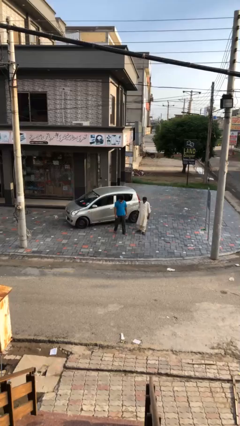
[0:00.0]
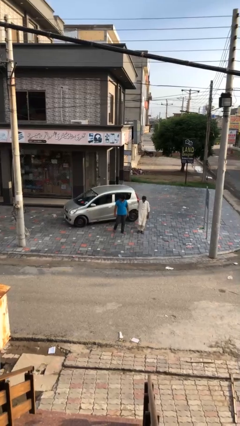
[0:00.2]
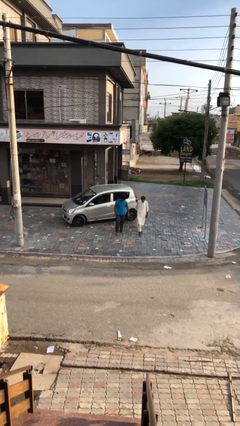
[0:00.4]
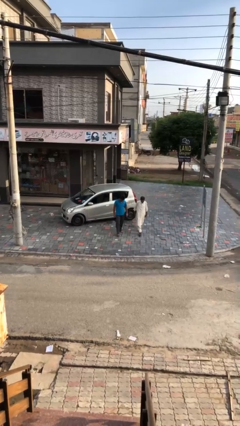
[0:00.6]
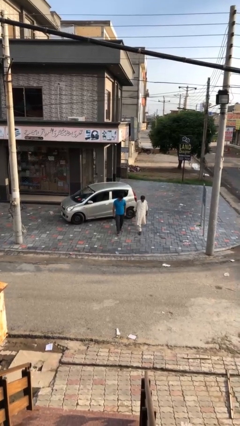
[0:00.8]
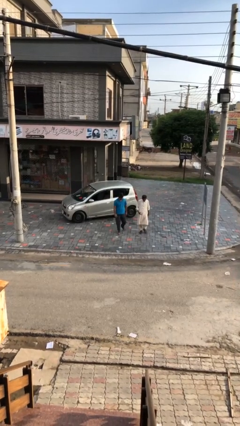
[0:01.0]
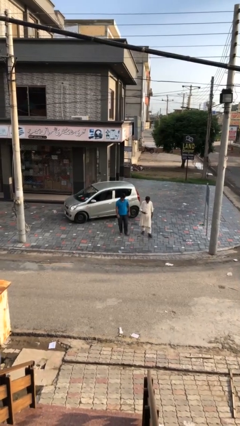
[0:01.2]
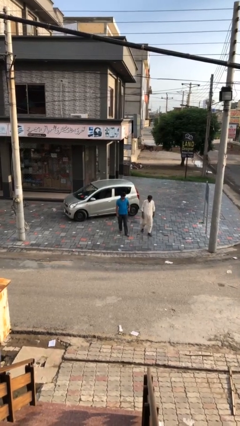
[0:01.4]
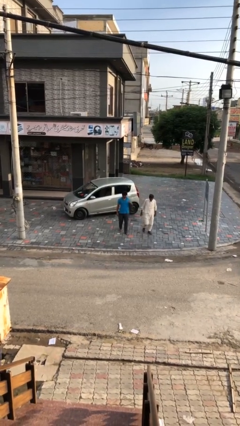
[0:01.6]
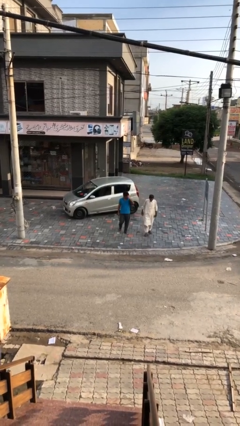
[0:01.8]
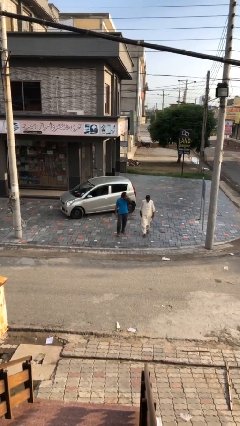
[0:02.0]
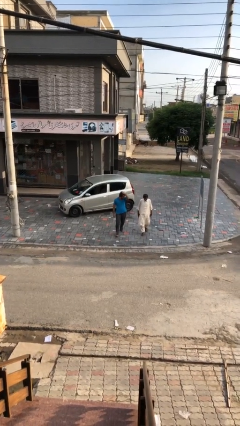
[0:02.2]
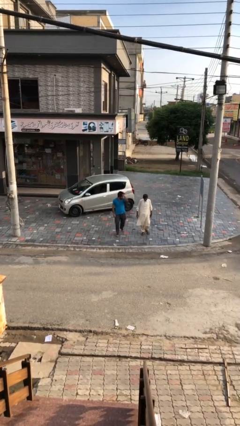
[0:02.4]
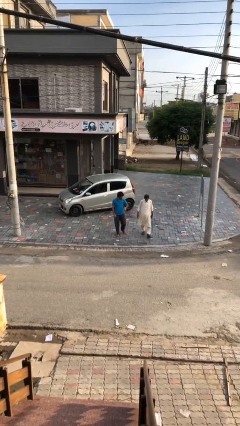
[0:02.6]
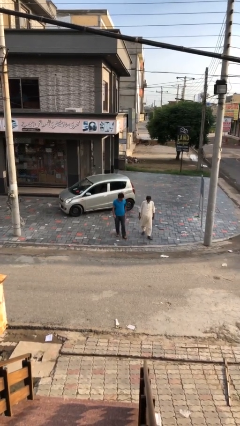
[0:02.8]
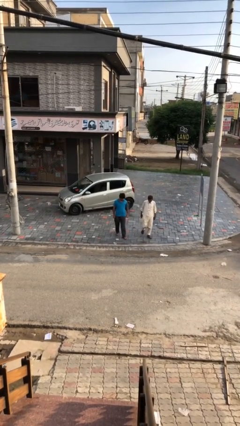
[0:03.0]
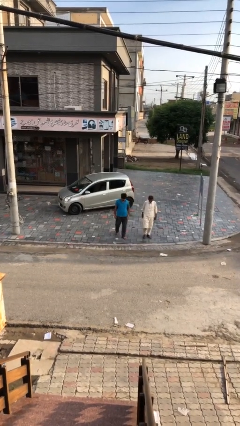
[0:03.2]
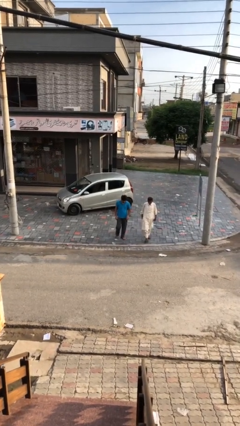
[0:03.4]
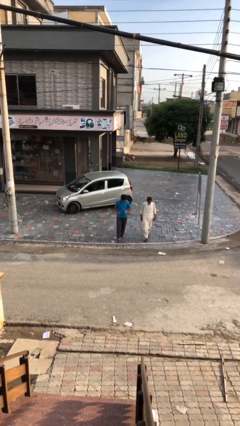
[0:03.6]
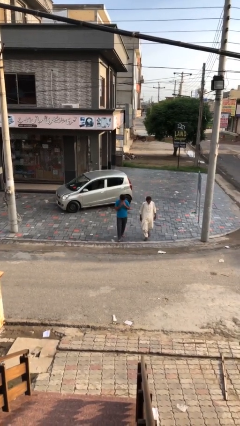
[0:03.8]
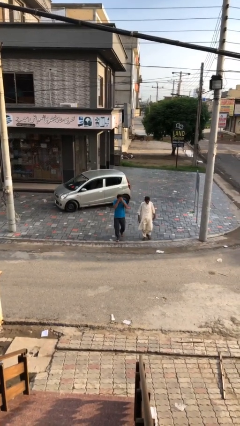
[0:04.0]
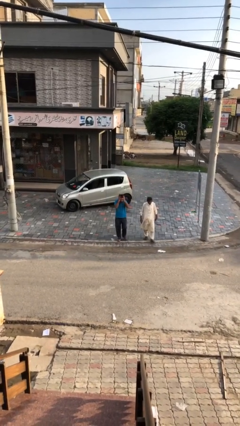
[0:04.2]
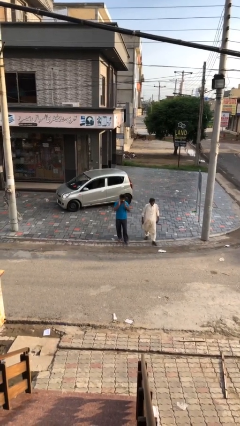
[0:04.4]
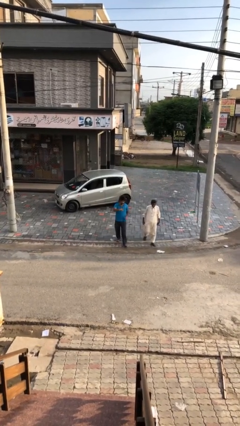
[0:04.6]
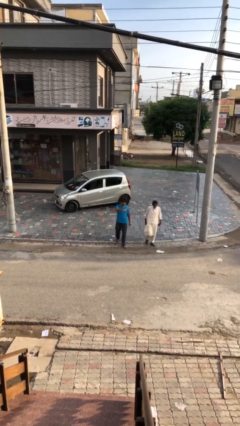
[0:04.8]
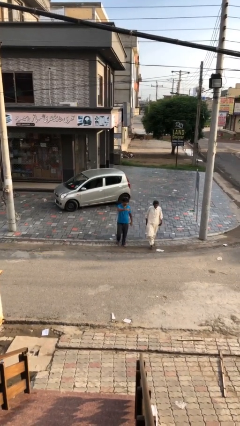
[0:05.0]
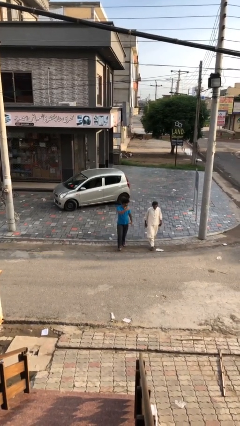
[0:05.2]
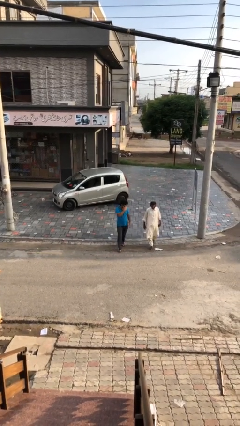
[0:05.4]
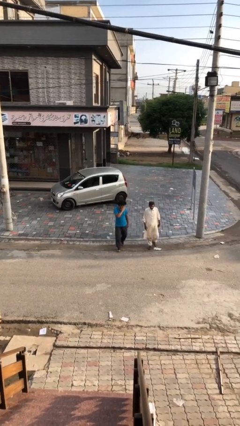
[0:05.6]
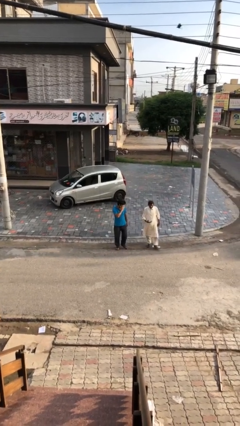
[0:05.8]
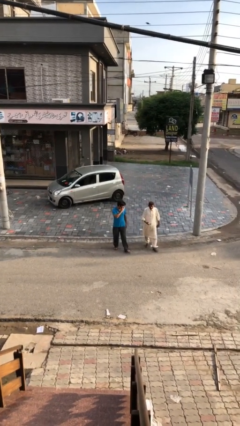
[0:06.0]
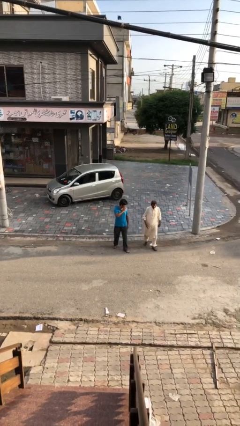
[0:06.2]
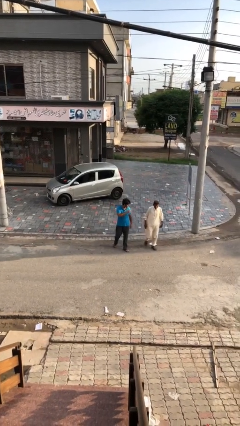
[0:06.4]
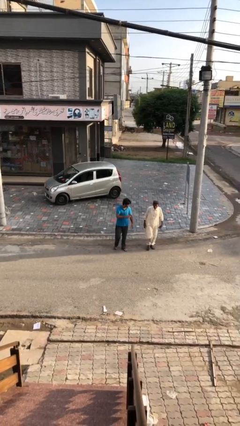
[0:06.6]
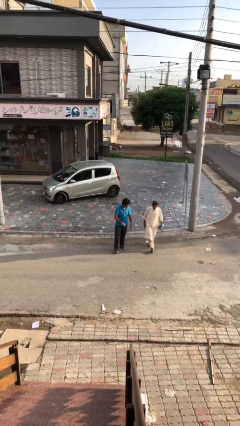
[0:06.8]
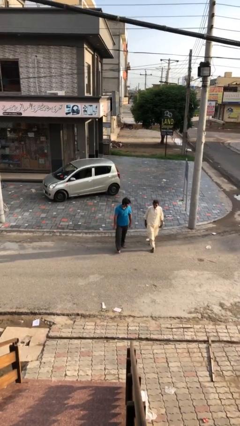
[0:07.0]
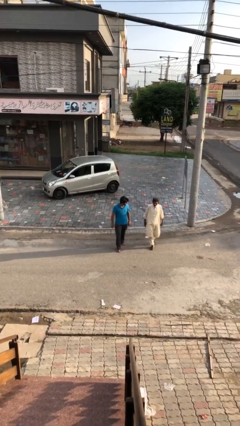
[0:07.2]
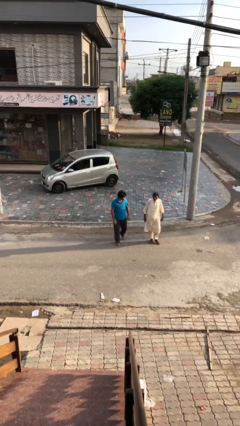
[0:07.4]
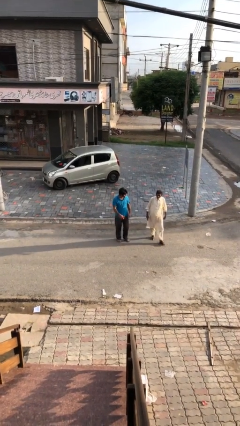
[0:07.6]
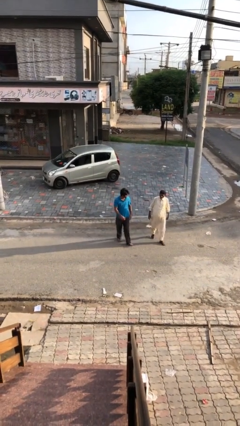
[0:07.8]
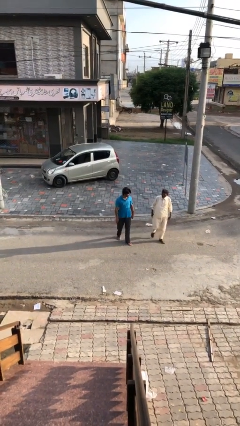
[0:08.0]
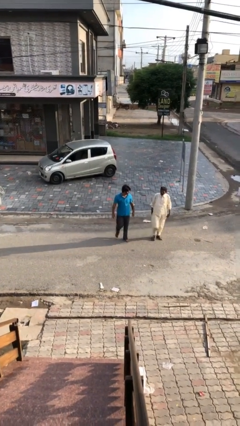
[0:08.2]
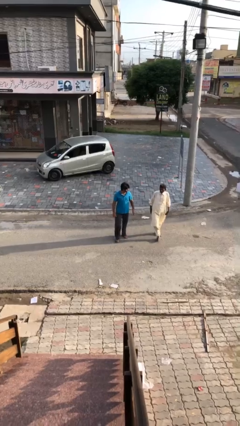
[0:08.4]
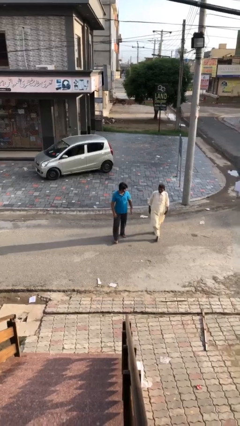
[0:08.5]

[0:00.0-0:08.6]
person talks to person

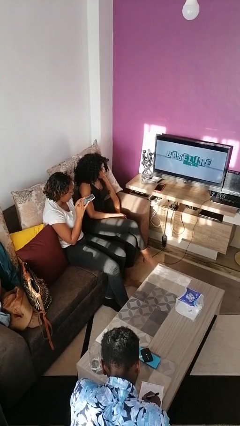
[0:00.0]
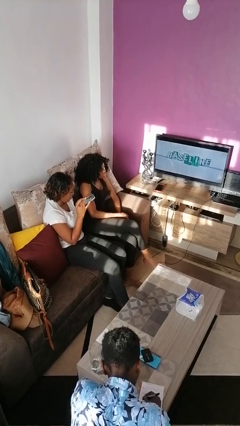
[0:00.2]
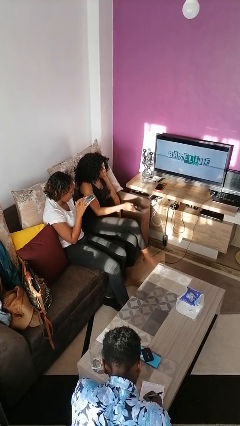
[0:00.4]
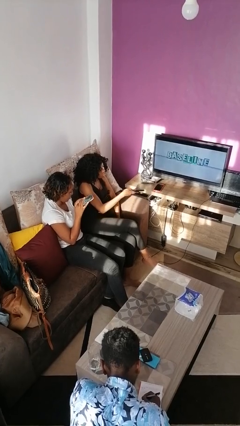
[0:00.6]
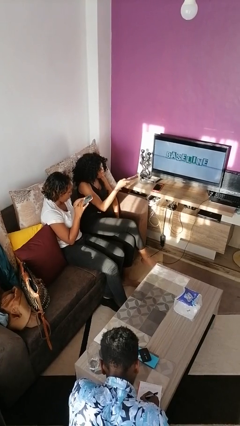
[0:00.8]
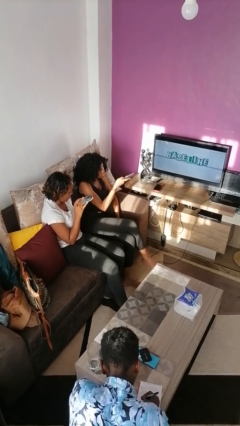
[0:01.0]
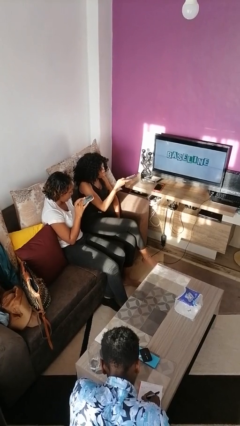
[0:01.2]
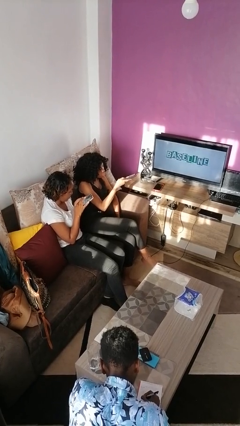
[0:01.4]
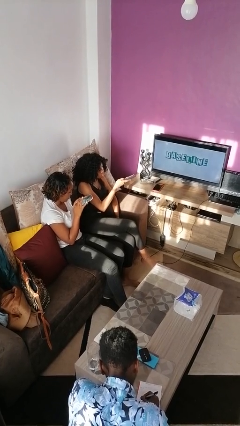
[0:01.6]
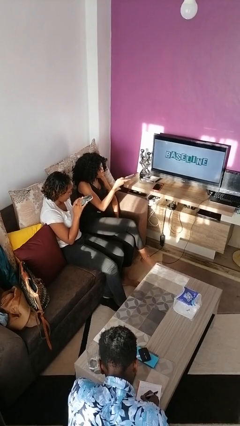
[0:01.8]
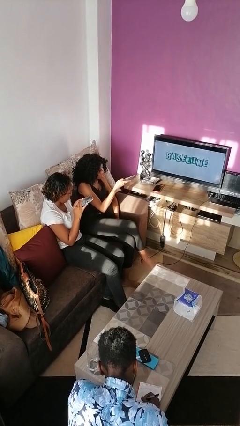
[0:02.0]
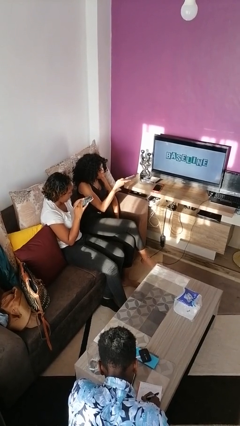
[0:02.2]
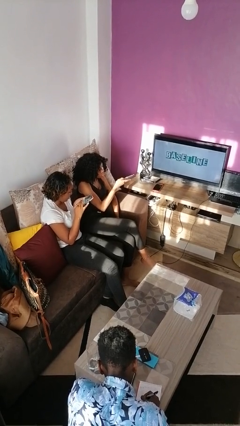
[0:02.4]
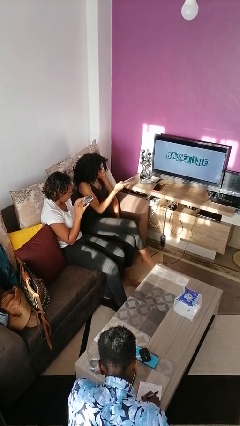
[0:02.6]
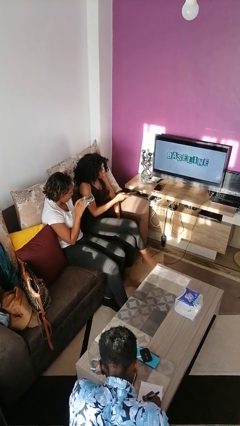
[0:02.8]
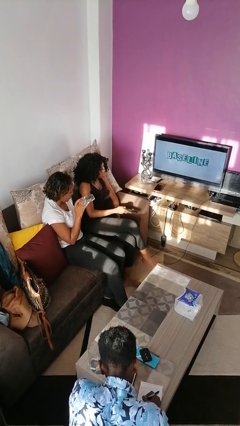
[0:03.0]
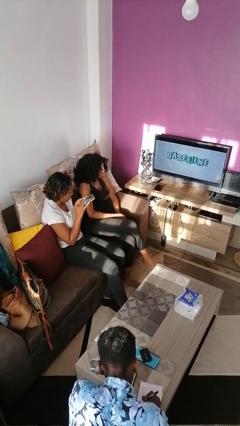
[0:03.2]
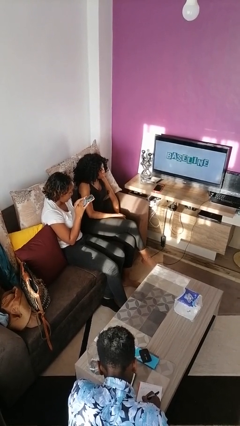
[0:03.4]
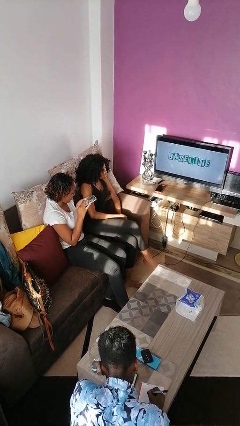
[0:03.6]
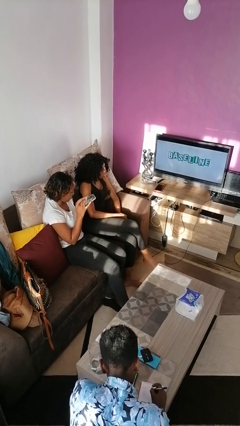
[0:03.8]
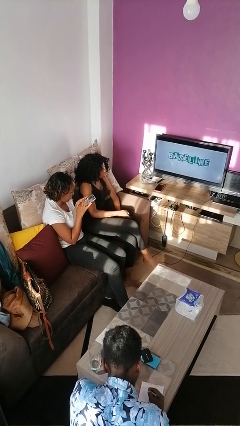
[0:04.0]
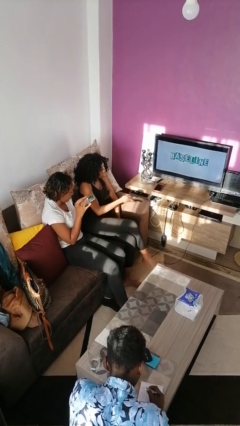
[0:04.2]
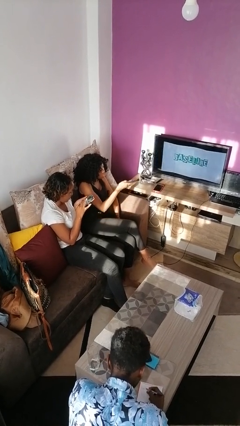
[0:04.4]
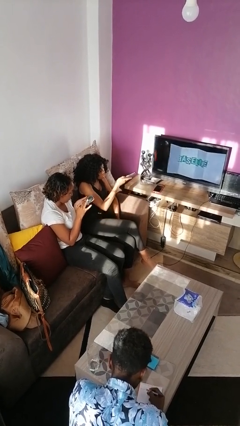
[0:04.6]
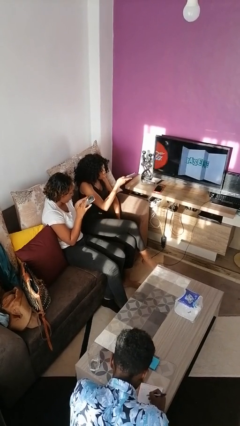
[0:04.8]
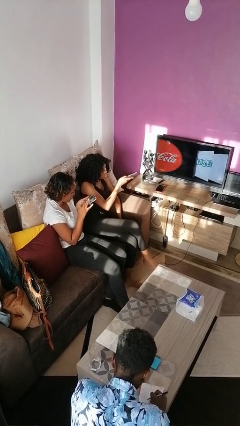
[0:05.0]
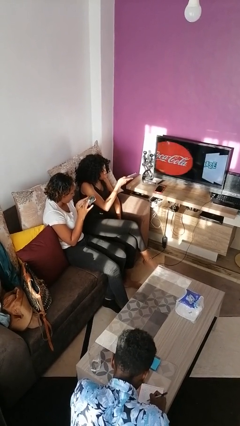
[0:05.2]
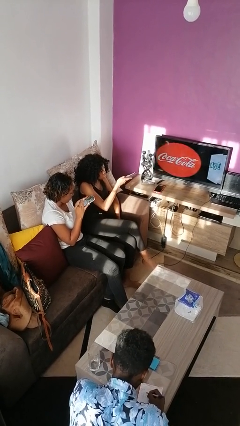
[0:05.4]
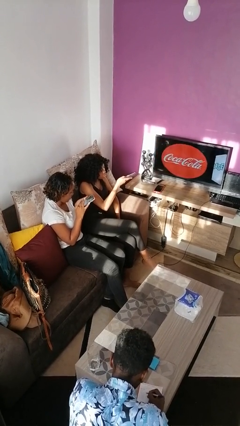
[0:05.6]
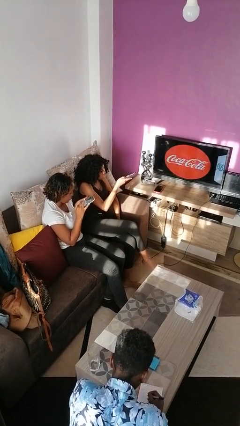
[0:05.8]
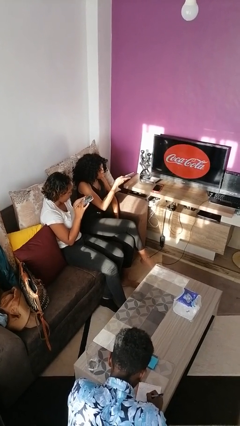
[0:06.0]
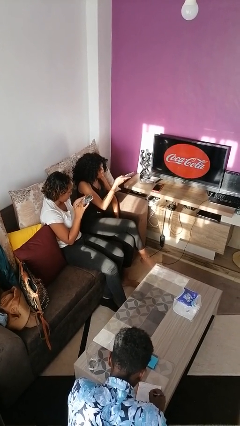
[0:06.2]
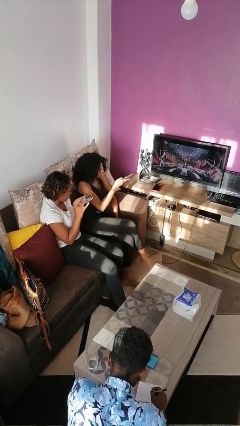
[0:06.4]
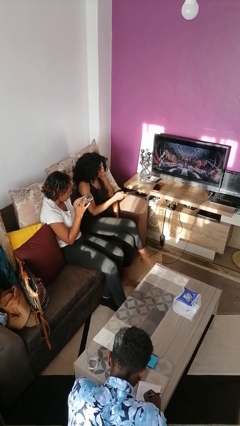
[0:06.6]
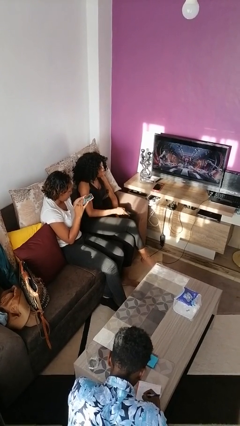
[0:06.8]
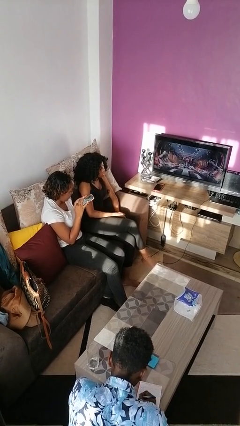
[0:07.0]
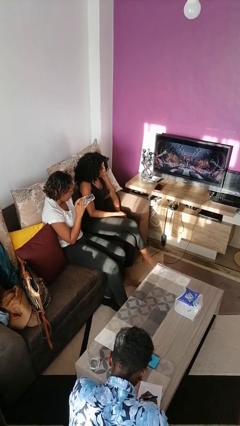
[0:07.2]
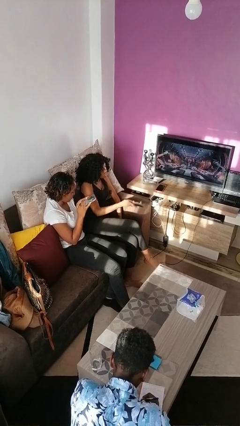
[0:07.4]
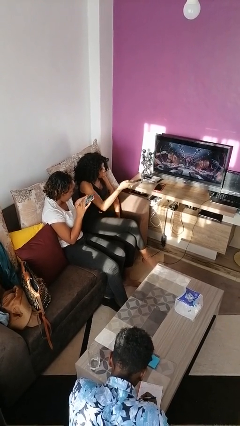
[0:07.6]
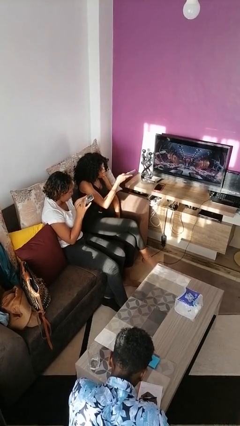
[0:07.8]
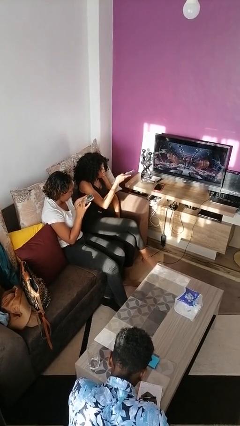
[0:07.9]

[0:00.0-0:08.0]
person puts on boots

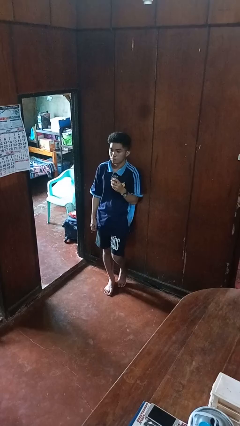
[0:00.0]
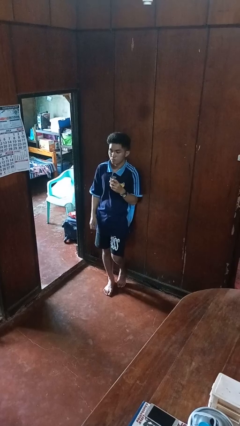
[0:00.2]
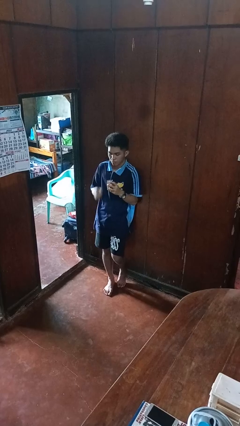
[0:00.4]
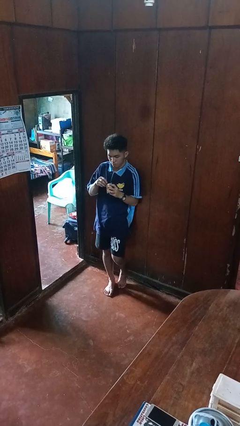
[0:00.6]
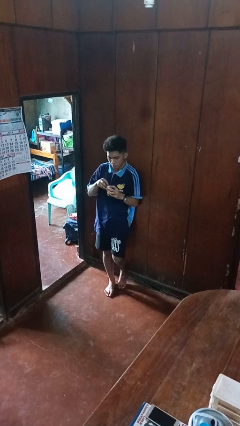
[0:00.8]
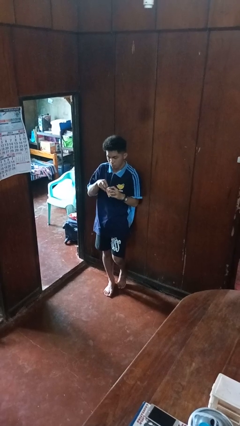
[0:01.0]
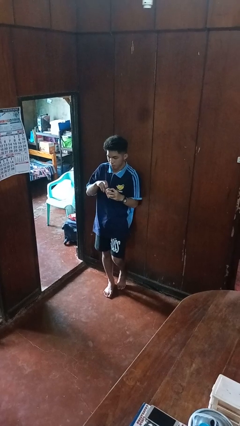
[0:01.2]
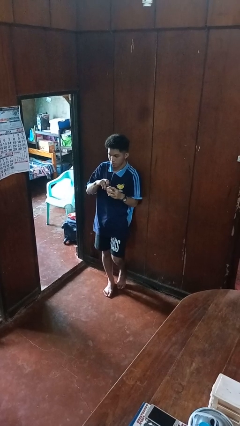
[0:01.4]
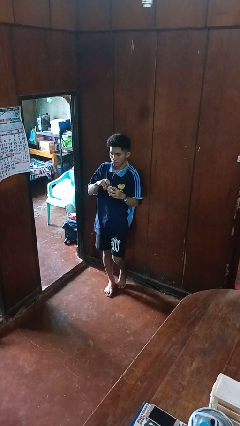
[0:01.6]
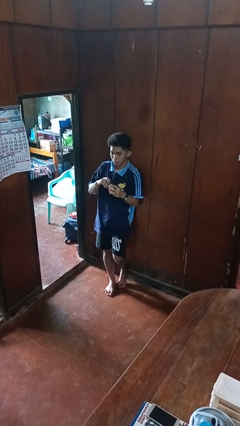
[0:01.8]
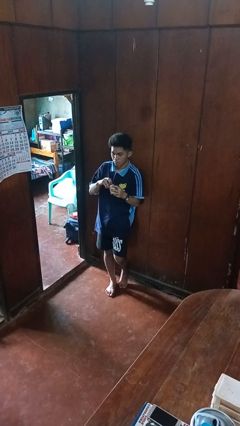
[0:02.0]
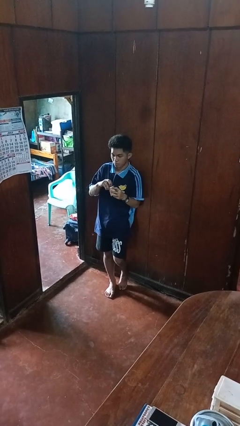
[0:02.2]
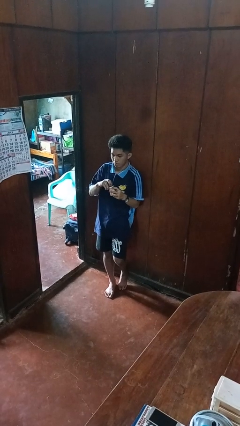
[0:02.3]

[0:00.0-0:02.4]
person opens beverage can
